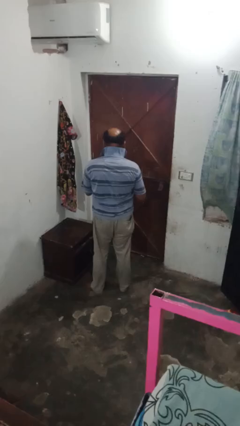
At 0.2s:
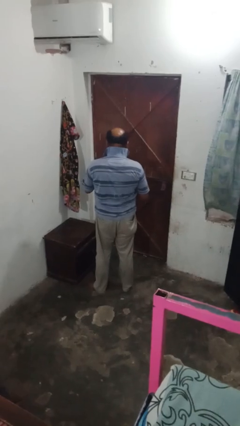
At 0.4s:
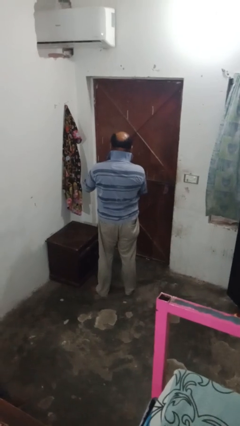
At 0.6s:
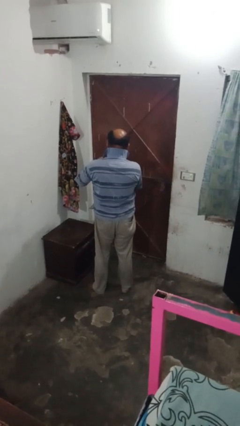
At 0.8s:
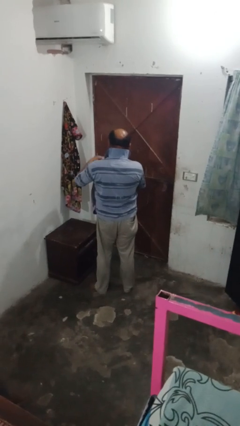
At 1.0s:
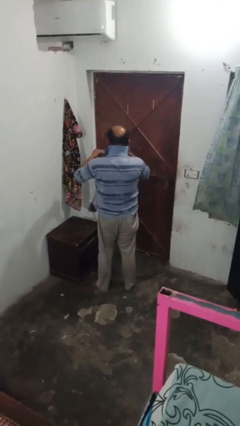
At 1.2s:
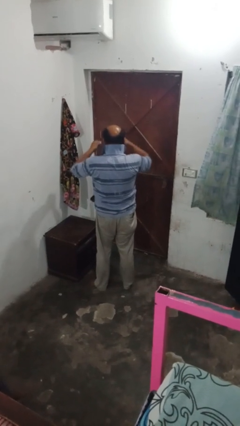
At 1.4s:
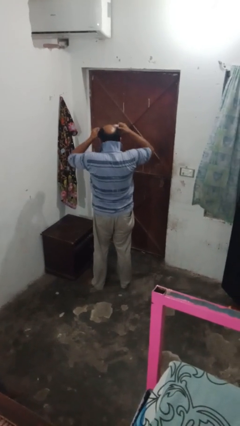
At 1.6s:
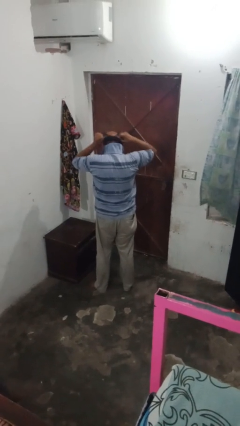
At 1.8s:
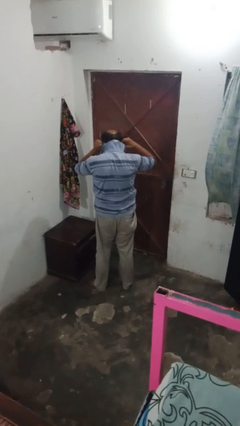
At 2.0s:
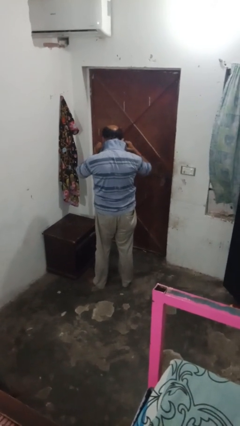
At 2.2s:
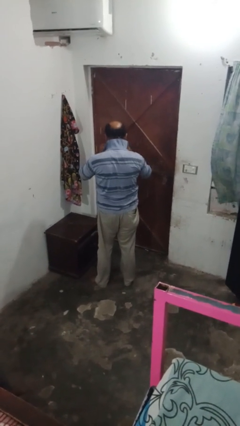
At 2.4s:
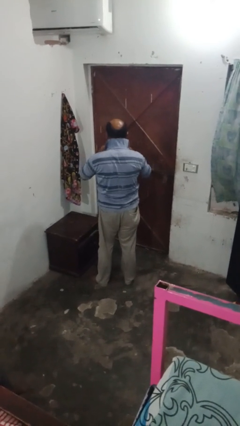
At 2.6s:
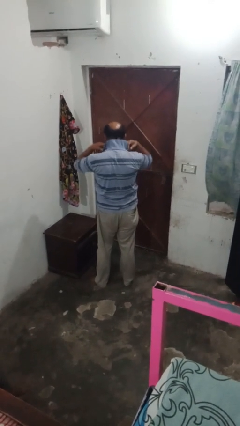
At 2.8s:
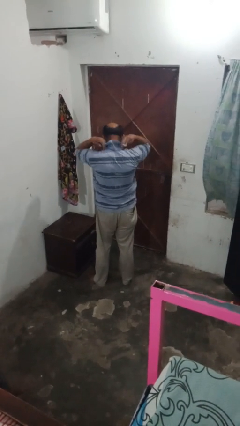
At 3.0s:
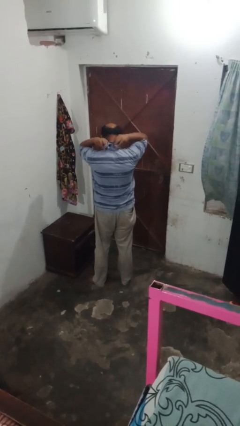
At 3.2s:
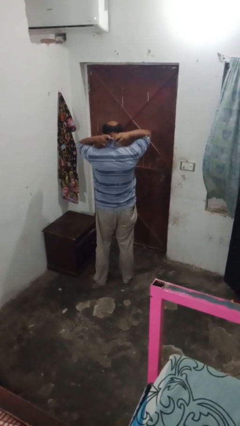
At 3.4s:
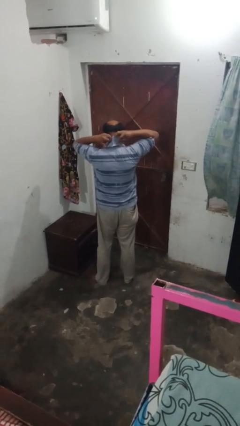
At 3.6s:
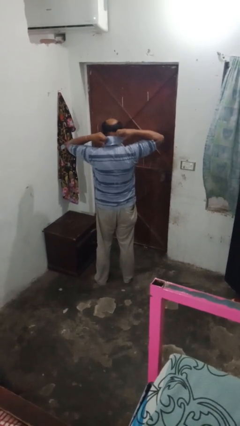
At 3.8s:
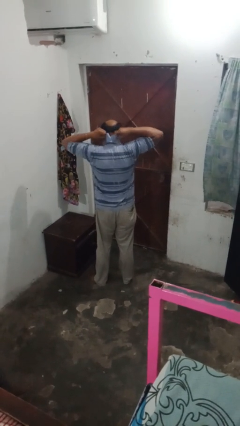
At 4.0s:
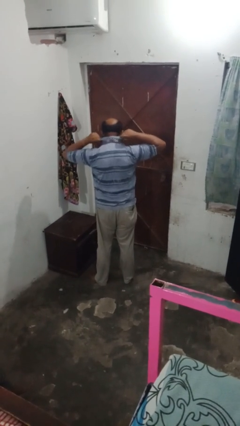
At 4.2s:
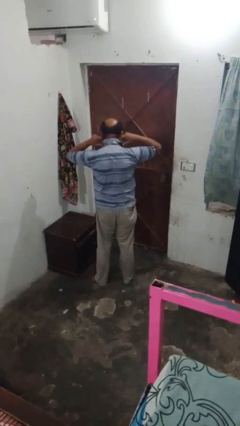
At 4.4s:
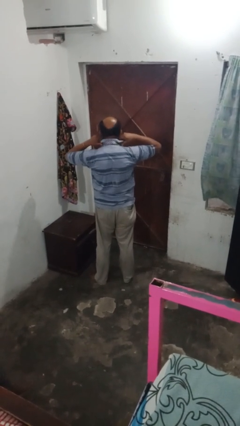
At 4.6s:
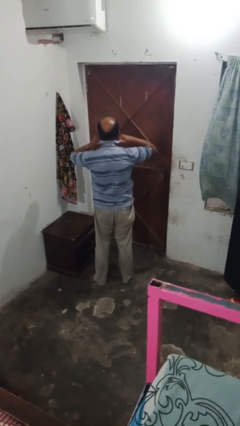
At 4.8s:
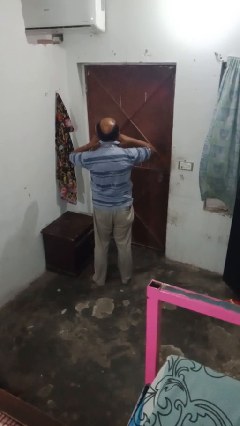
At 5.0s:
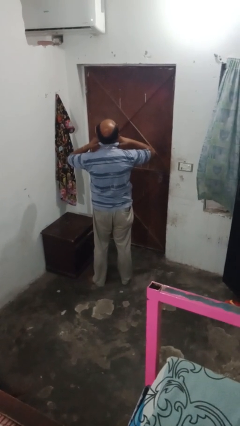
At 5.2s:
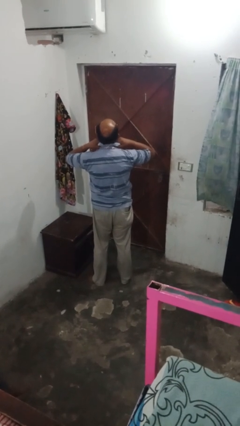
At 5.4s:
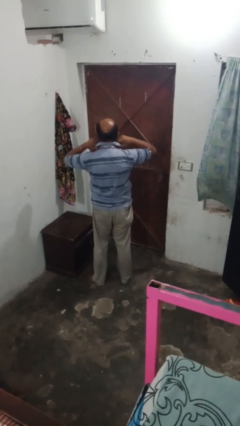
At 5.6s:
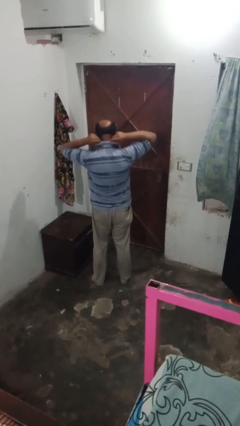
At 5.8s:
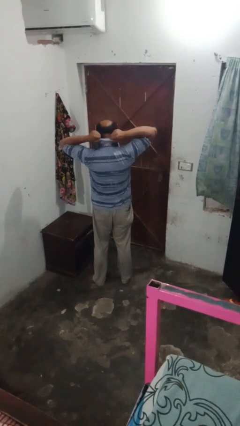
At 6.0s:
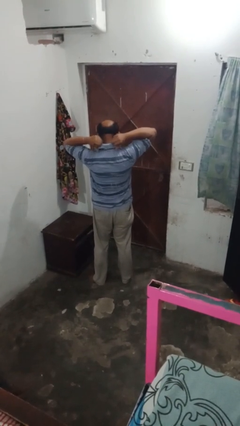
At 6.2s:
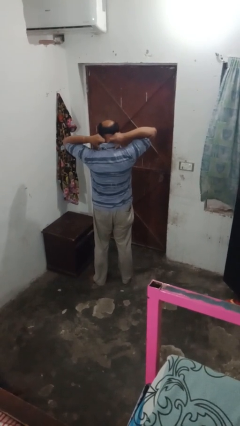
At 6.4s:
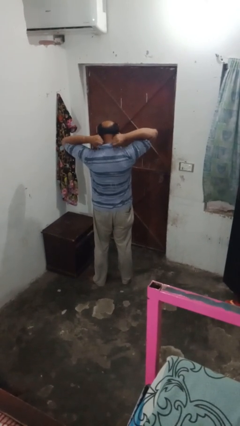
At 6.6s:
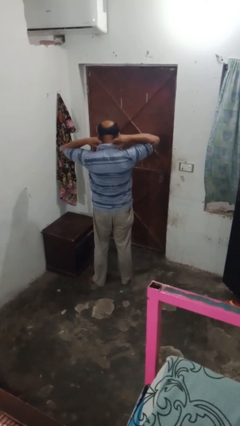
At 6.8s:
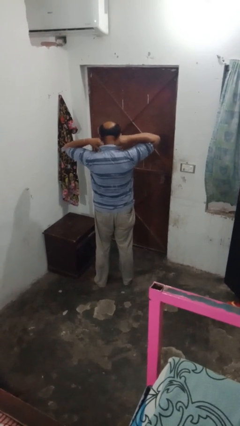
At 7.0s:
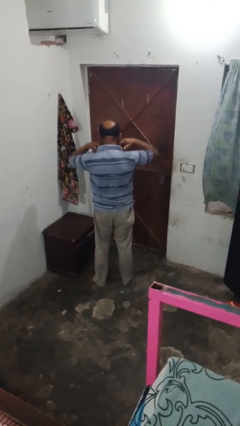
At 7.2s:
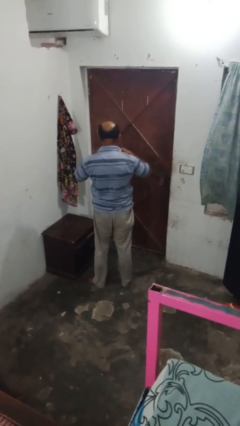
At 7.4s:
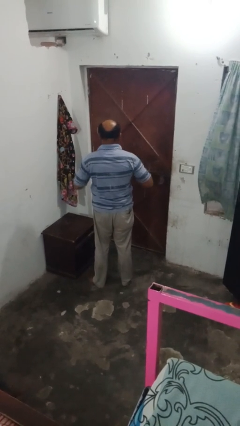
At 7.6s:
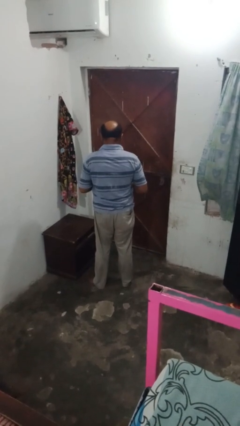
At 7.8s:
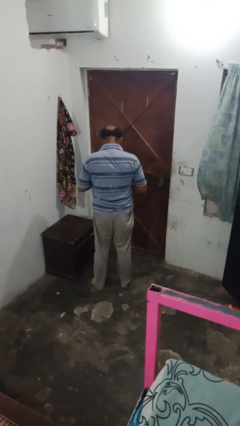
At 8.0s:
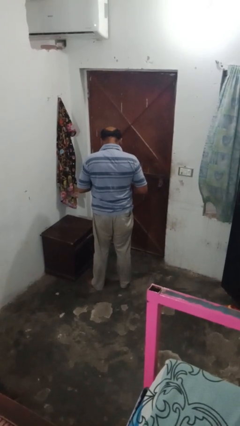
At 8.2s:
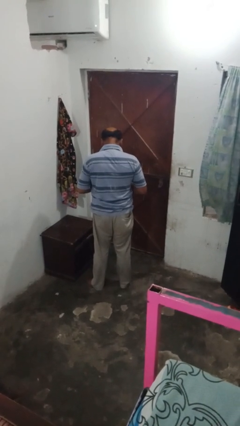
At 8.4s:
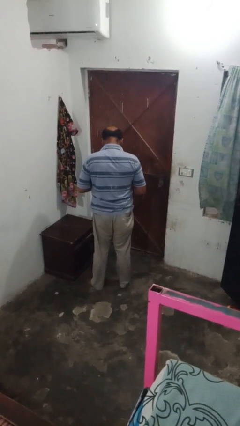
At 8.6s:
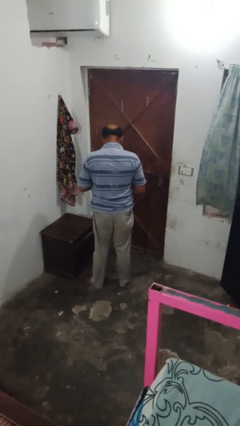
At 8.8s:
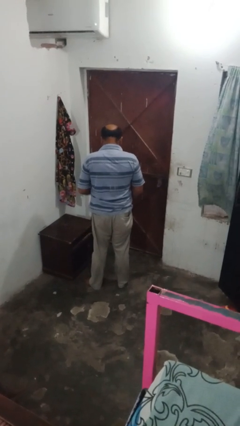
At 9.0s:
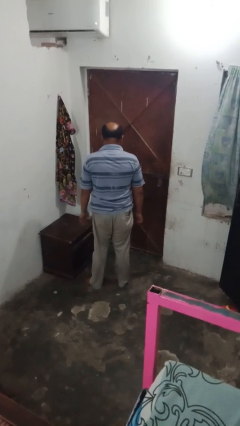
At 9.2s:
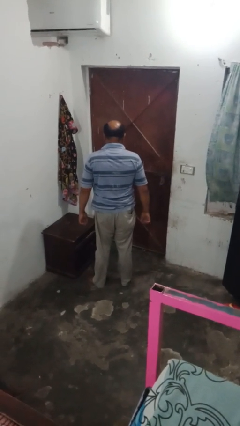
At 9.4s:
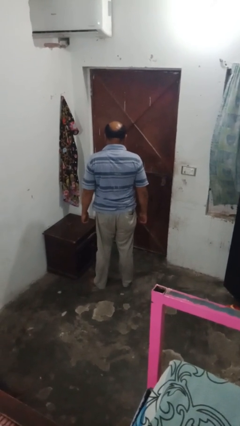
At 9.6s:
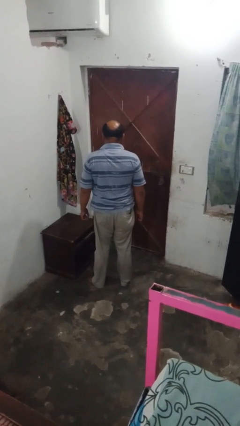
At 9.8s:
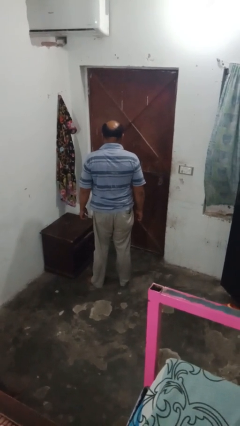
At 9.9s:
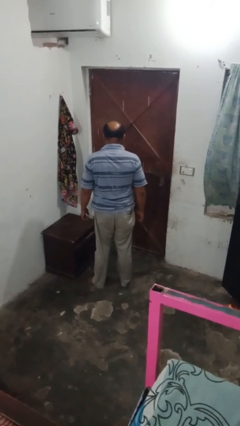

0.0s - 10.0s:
person puts on necktie

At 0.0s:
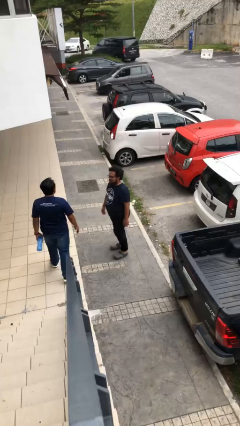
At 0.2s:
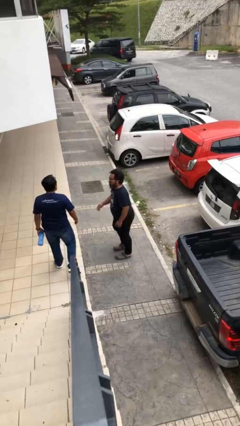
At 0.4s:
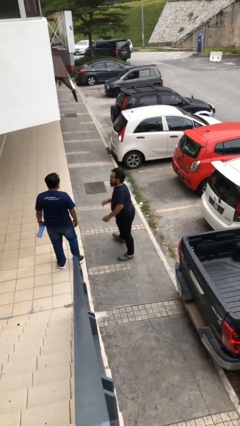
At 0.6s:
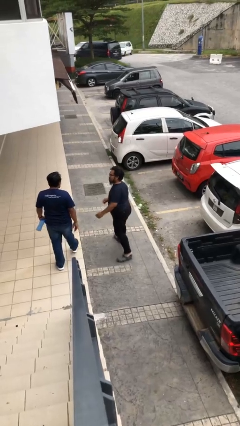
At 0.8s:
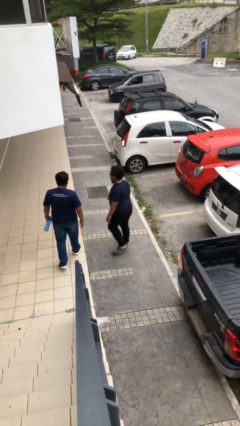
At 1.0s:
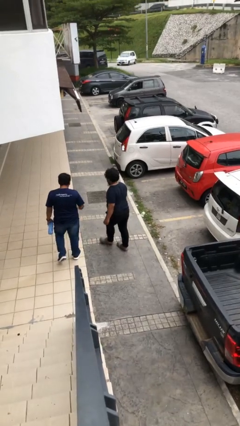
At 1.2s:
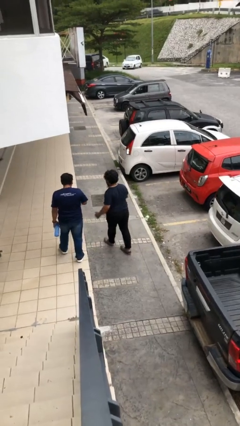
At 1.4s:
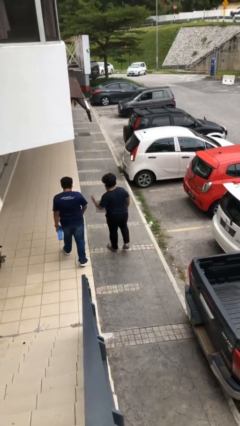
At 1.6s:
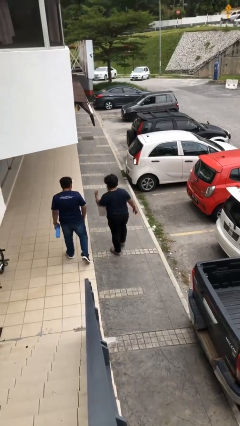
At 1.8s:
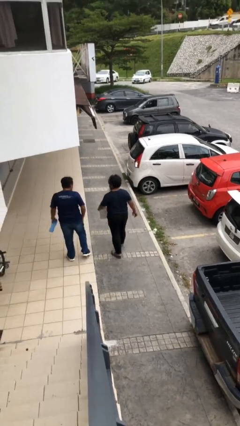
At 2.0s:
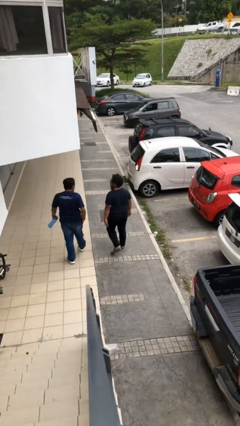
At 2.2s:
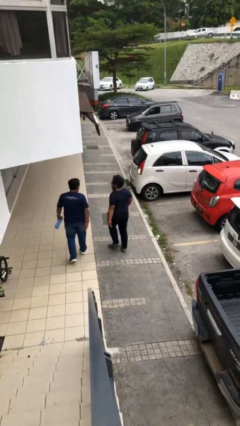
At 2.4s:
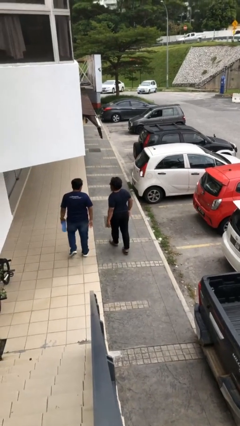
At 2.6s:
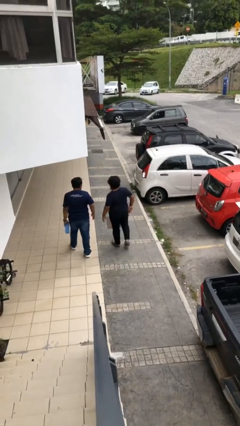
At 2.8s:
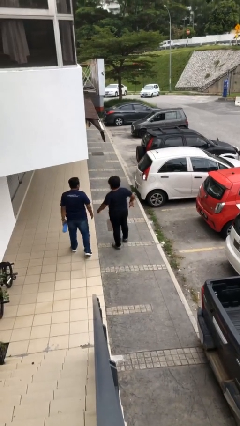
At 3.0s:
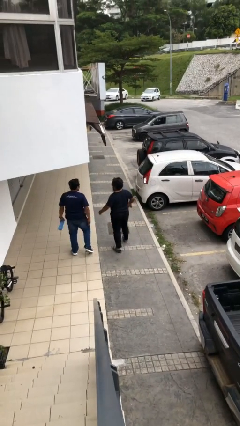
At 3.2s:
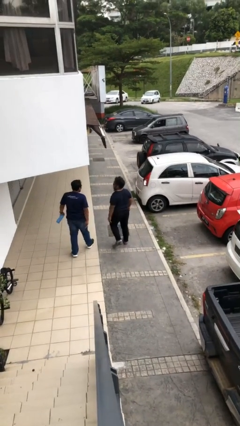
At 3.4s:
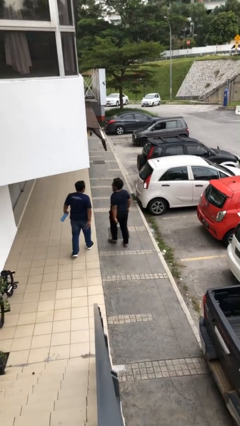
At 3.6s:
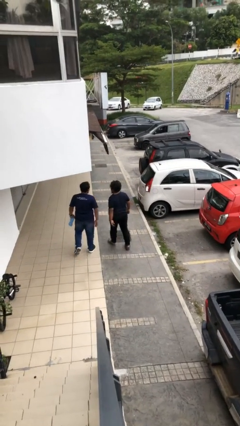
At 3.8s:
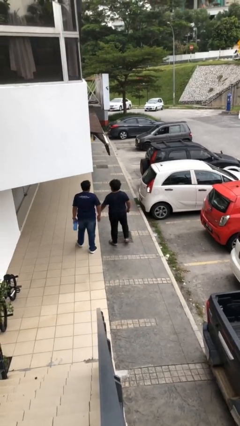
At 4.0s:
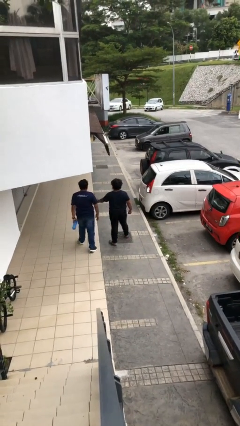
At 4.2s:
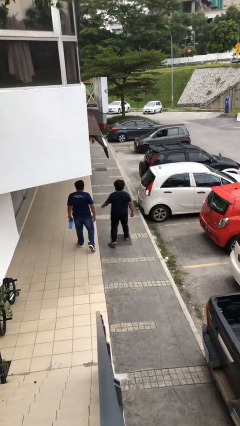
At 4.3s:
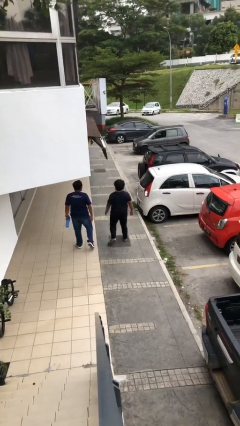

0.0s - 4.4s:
person talks to person

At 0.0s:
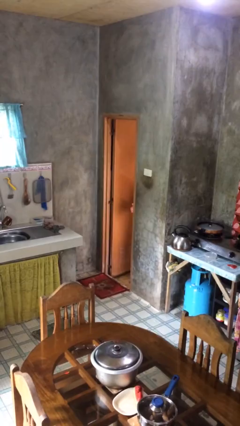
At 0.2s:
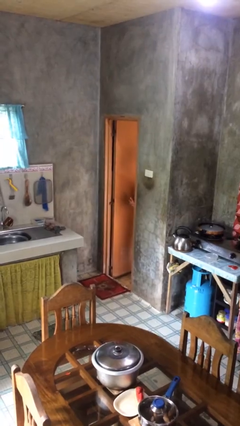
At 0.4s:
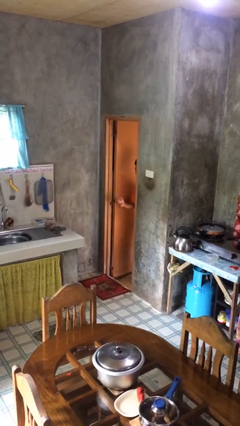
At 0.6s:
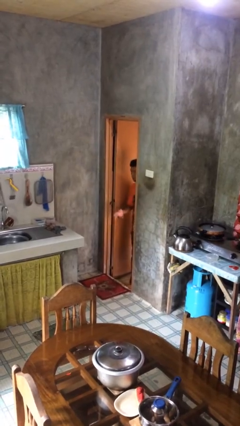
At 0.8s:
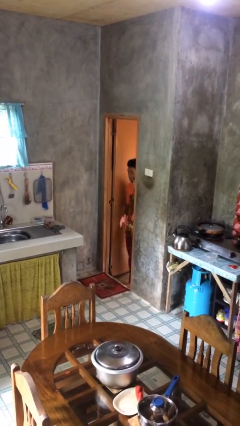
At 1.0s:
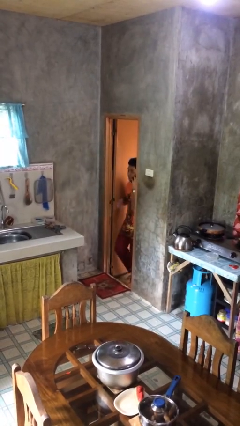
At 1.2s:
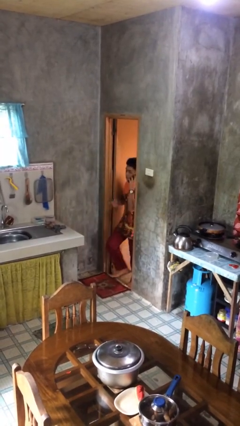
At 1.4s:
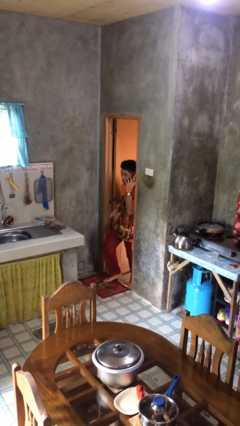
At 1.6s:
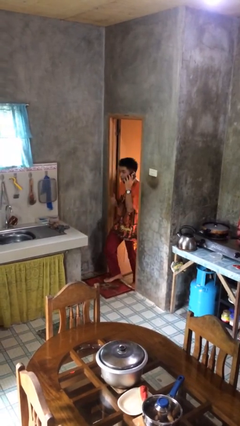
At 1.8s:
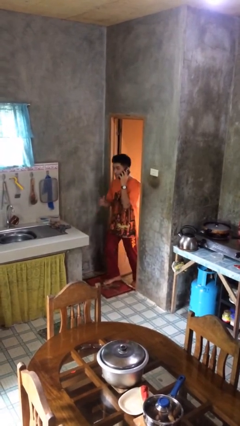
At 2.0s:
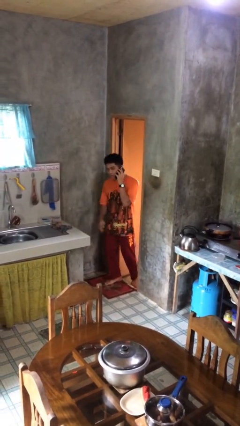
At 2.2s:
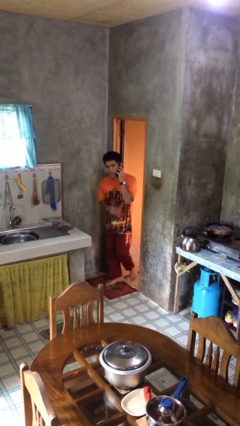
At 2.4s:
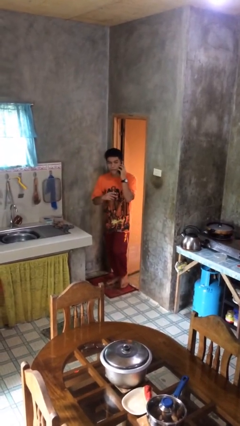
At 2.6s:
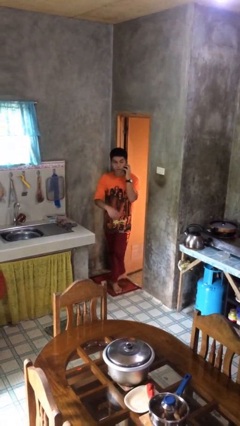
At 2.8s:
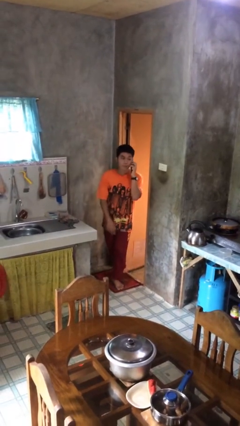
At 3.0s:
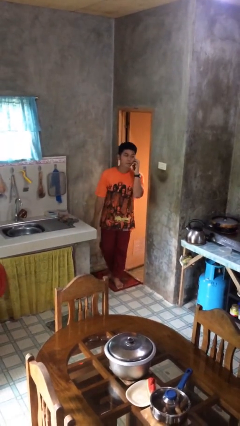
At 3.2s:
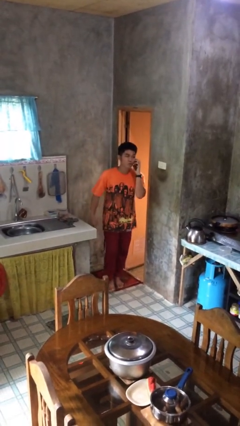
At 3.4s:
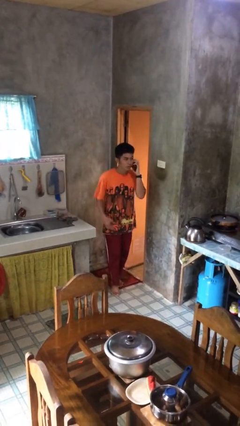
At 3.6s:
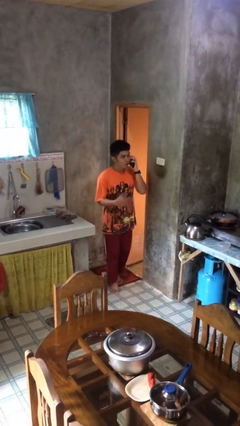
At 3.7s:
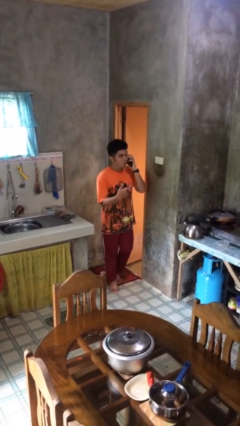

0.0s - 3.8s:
person enters scene through structure
